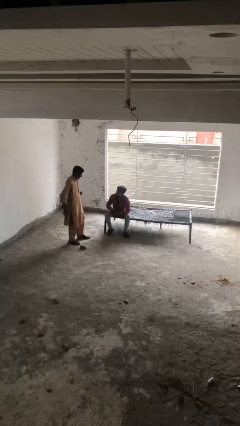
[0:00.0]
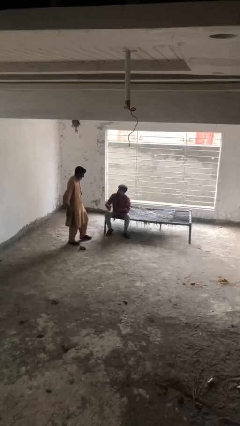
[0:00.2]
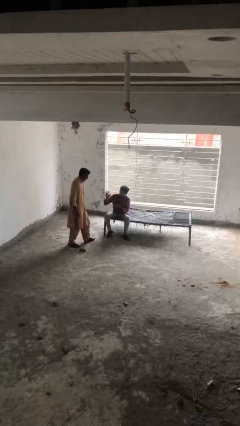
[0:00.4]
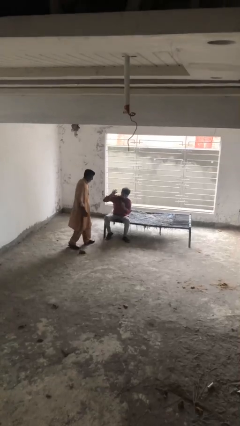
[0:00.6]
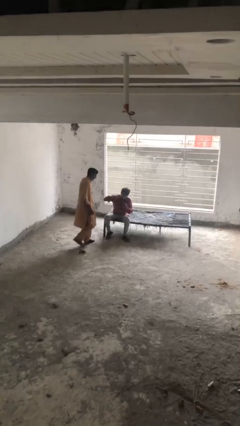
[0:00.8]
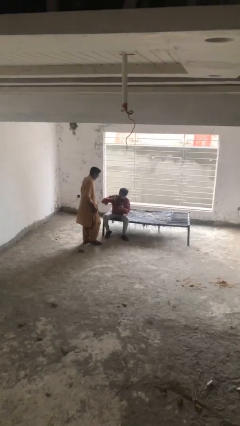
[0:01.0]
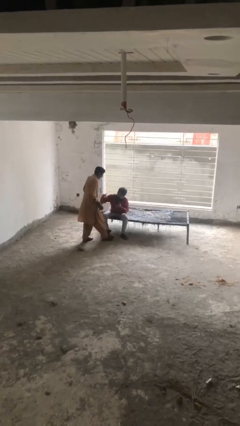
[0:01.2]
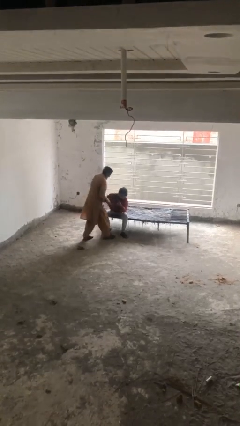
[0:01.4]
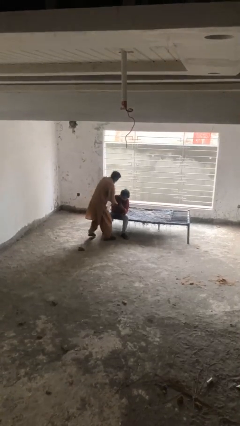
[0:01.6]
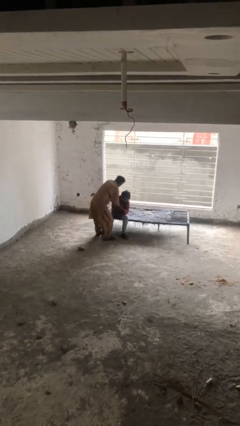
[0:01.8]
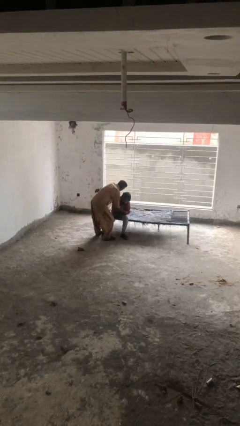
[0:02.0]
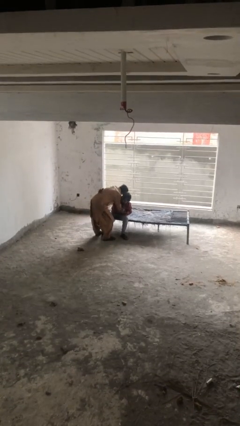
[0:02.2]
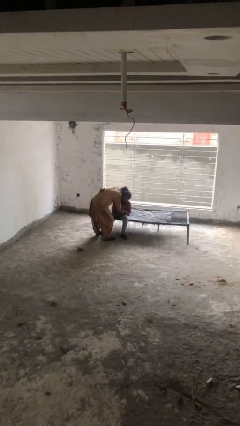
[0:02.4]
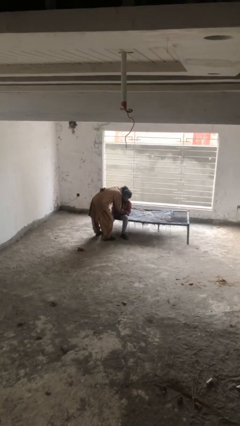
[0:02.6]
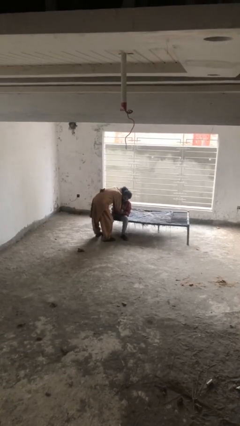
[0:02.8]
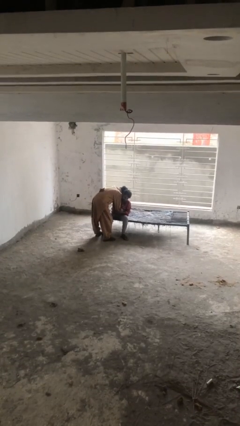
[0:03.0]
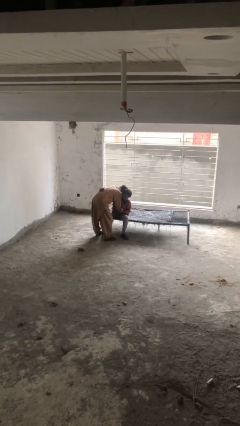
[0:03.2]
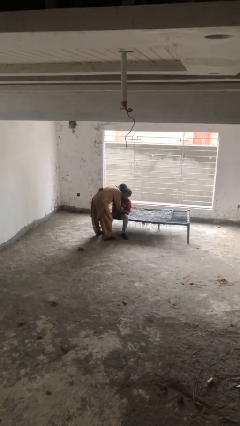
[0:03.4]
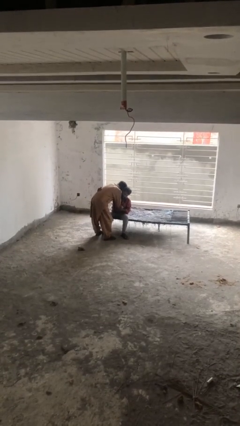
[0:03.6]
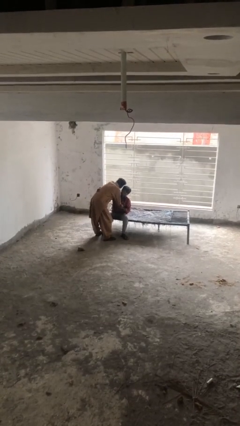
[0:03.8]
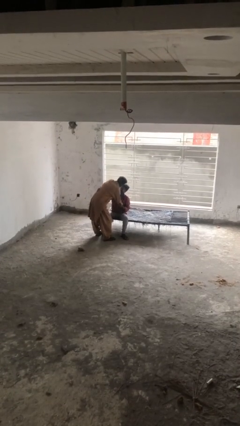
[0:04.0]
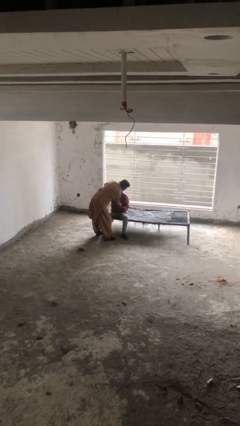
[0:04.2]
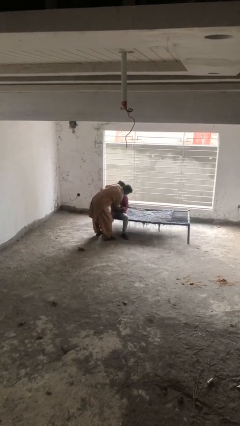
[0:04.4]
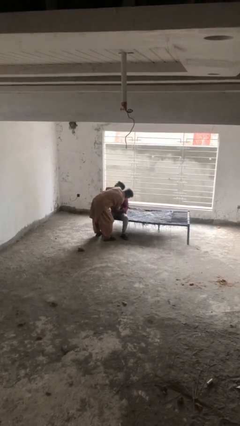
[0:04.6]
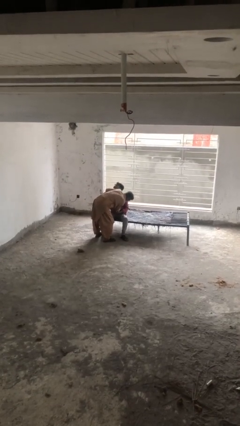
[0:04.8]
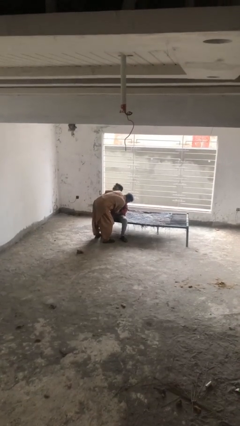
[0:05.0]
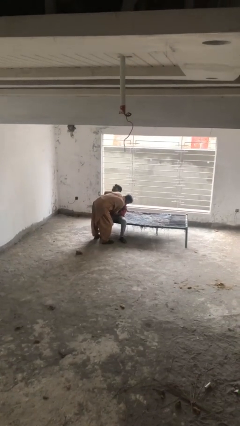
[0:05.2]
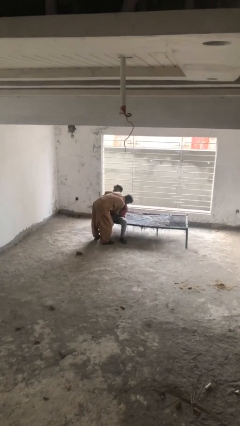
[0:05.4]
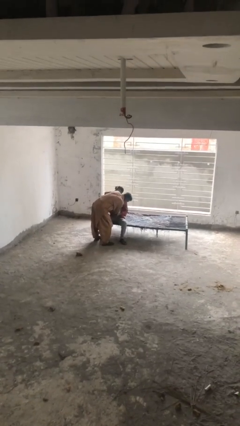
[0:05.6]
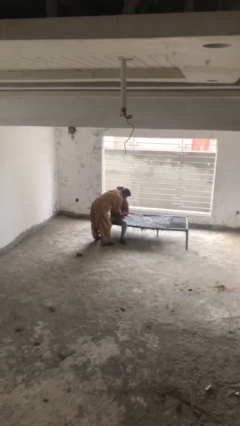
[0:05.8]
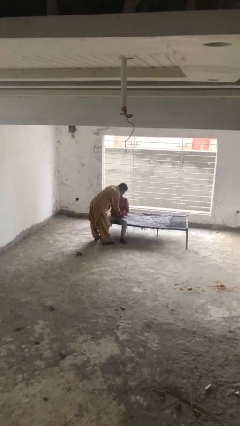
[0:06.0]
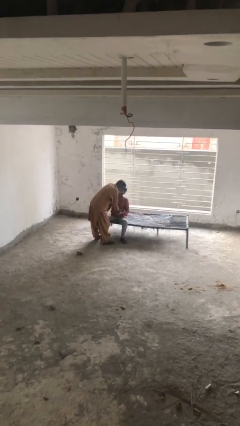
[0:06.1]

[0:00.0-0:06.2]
person embraces person

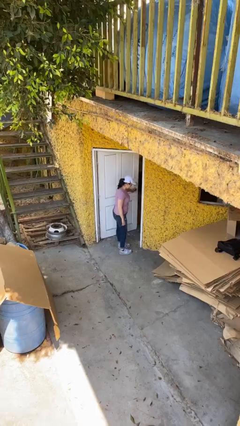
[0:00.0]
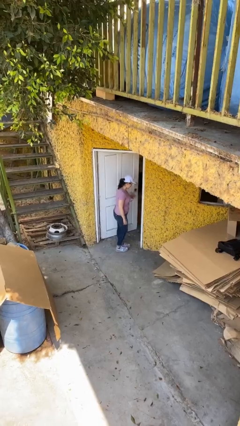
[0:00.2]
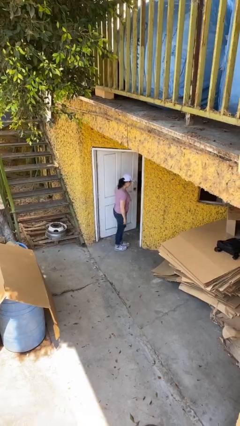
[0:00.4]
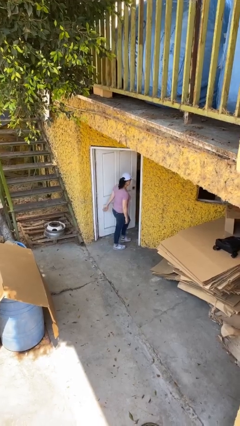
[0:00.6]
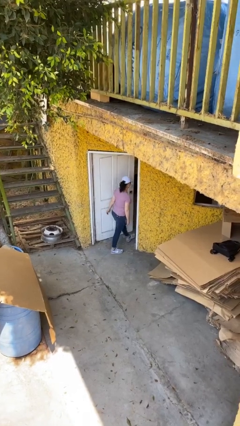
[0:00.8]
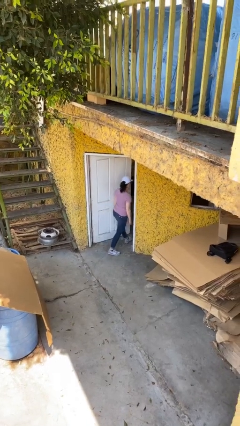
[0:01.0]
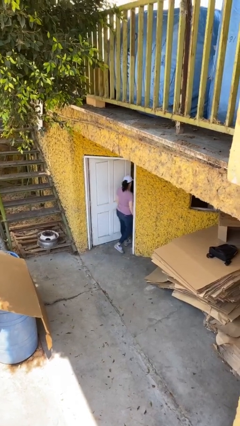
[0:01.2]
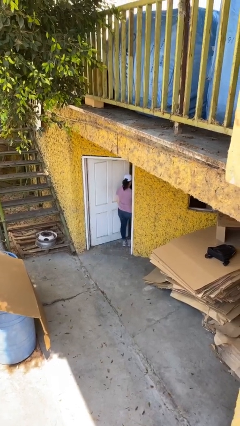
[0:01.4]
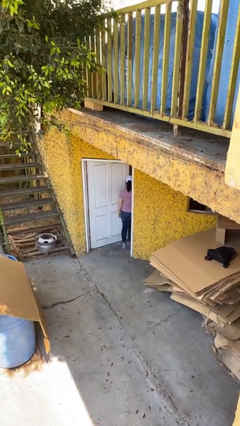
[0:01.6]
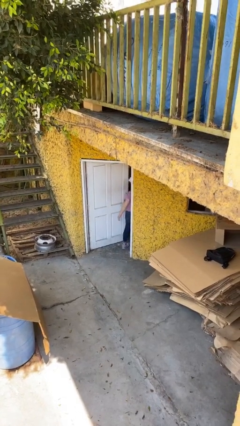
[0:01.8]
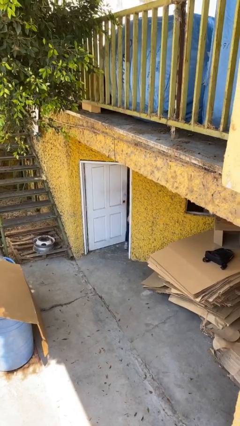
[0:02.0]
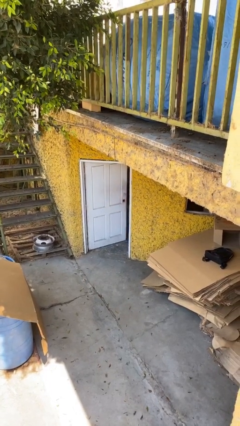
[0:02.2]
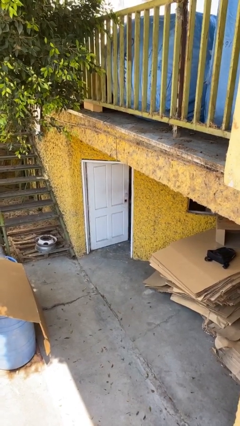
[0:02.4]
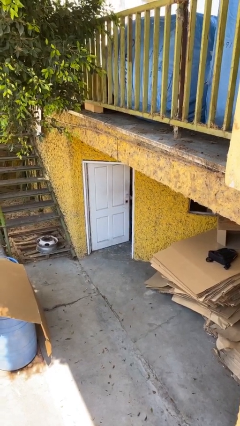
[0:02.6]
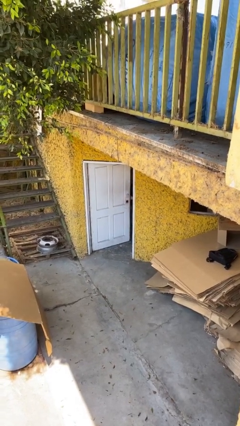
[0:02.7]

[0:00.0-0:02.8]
person exits scene through structure

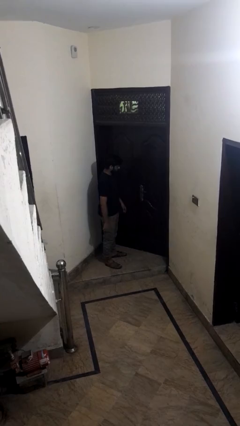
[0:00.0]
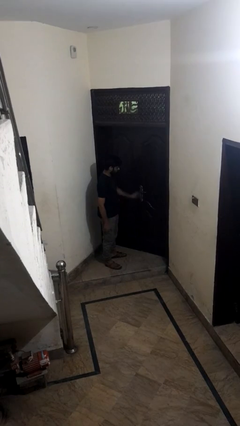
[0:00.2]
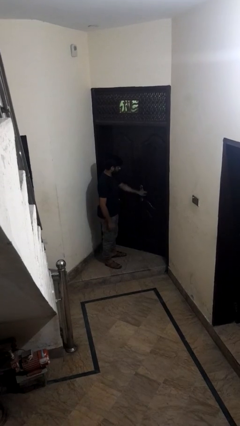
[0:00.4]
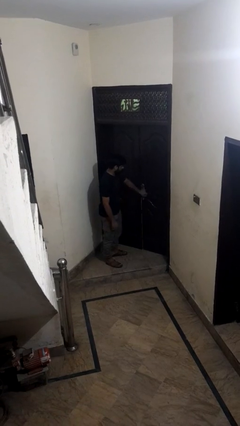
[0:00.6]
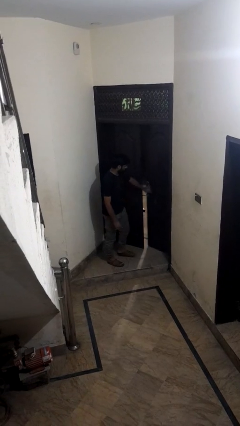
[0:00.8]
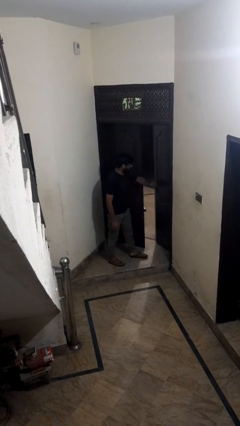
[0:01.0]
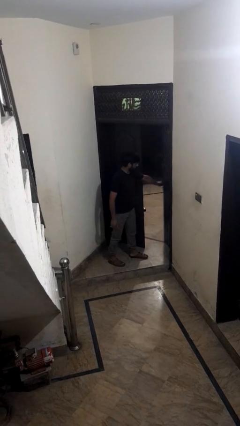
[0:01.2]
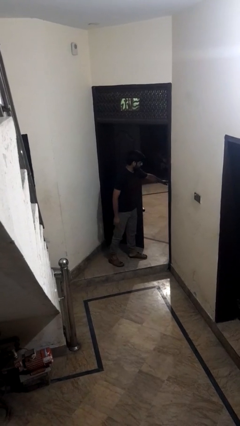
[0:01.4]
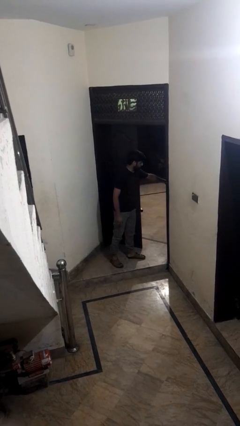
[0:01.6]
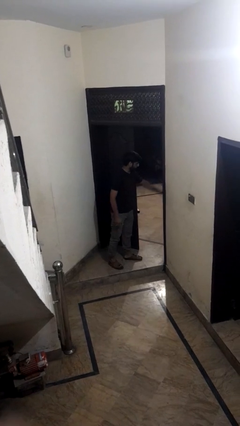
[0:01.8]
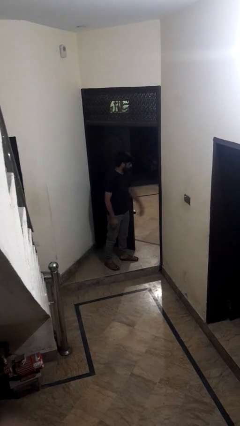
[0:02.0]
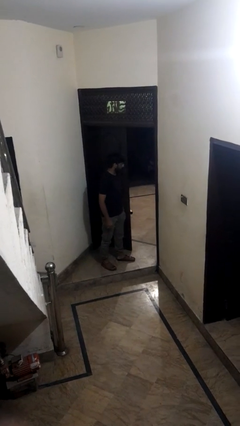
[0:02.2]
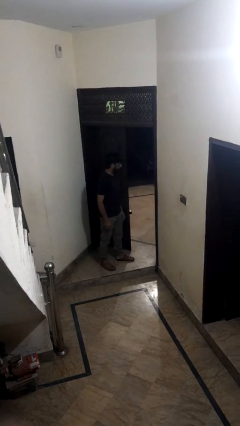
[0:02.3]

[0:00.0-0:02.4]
person opens facility door

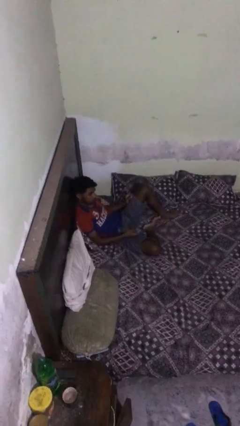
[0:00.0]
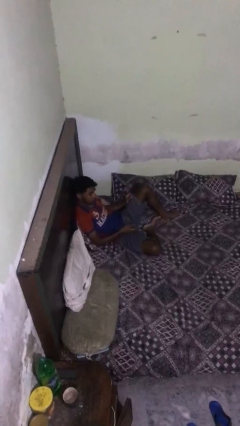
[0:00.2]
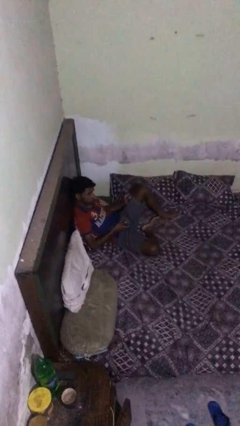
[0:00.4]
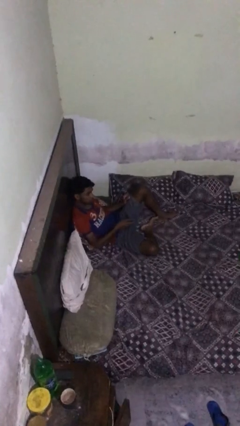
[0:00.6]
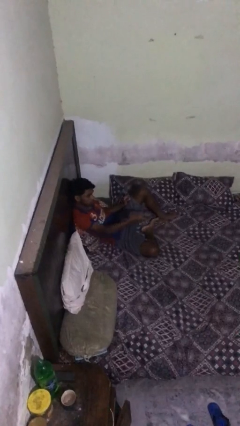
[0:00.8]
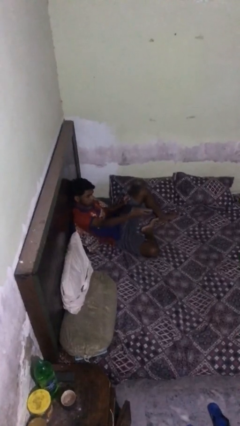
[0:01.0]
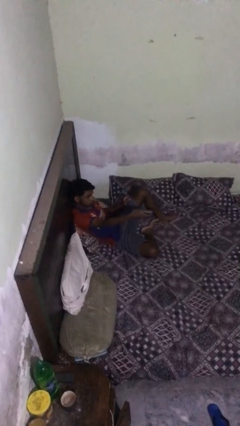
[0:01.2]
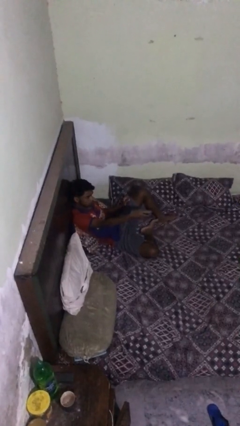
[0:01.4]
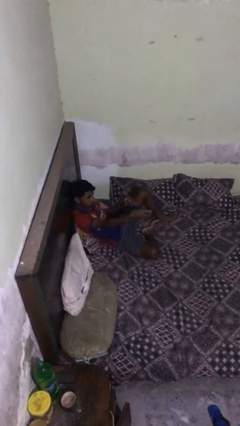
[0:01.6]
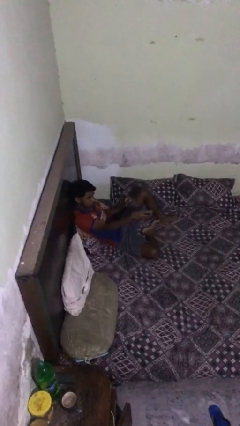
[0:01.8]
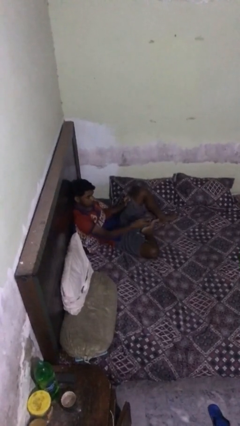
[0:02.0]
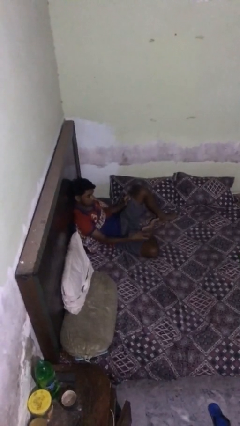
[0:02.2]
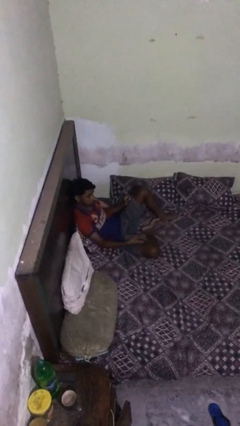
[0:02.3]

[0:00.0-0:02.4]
person uses television remote

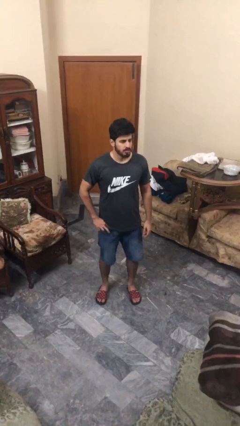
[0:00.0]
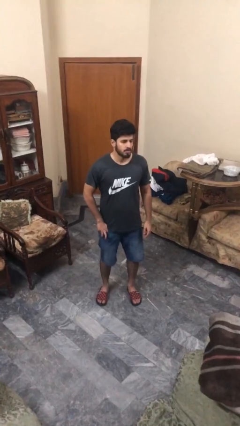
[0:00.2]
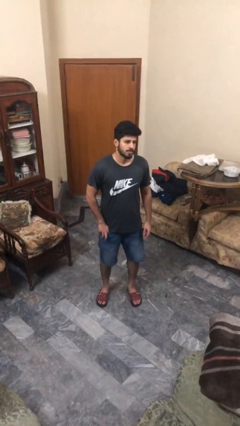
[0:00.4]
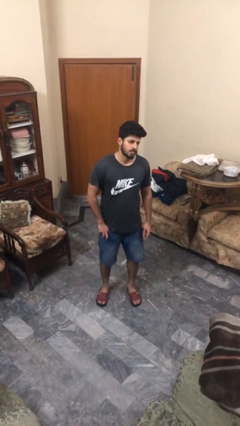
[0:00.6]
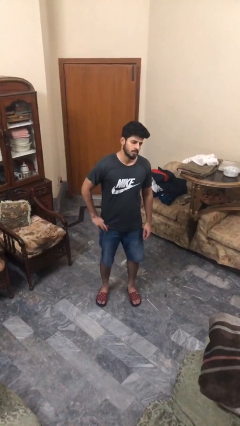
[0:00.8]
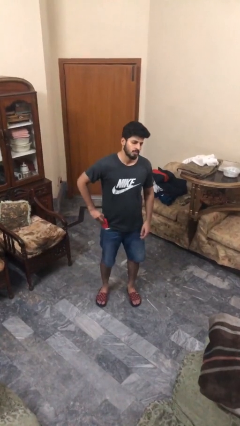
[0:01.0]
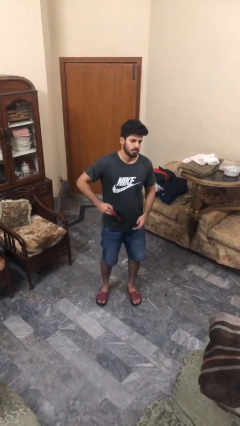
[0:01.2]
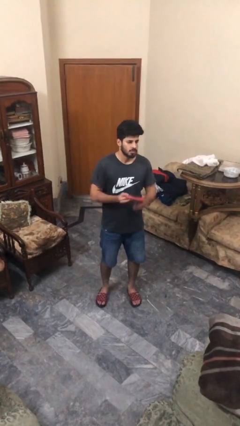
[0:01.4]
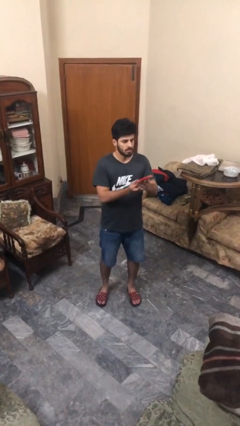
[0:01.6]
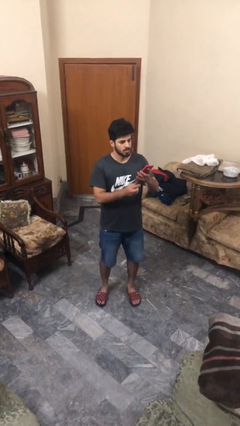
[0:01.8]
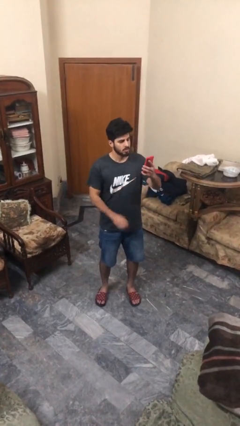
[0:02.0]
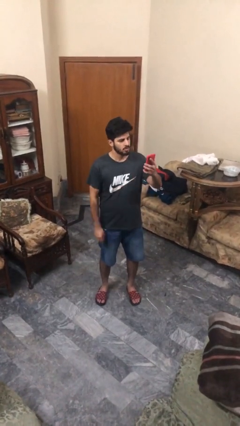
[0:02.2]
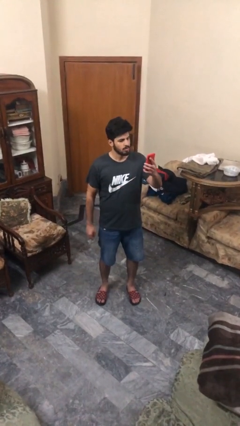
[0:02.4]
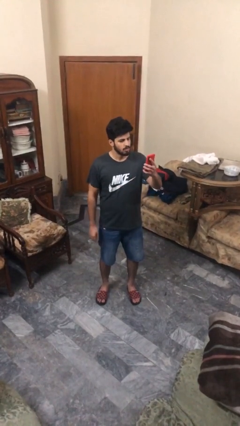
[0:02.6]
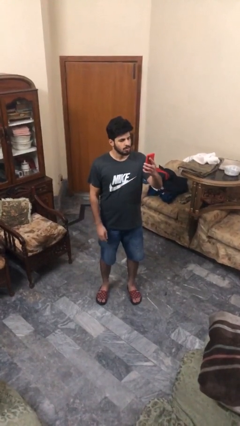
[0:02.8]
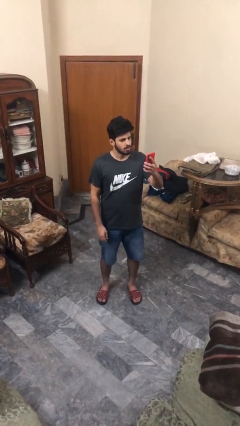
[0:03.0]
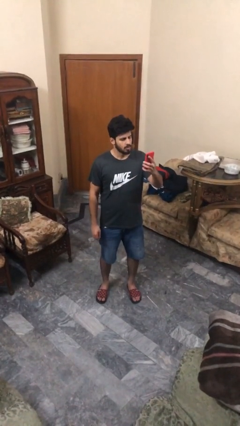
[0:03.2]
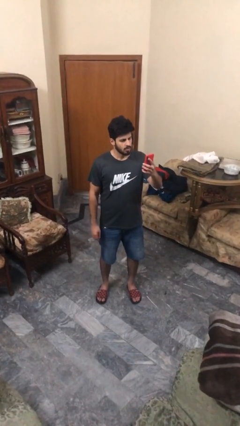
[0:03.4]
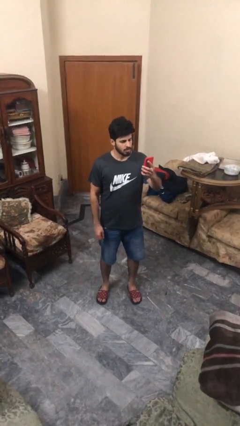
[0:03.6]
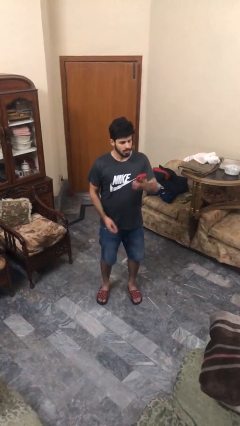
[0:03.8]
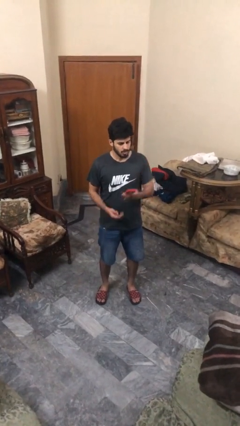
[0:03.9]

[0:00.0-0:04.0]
person takes phone from pocket
